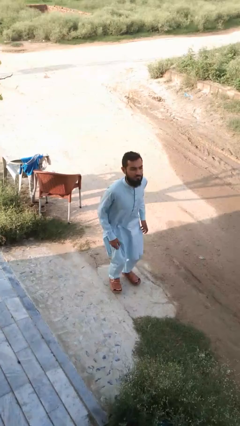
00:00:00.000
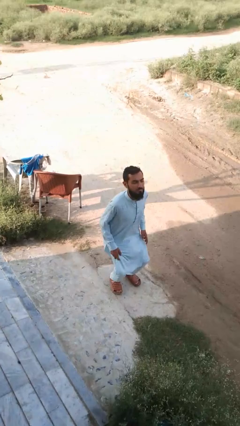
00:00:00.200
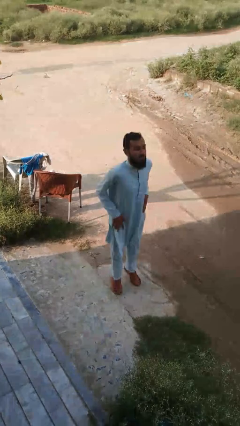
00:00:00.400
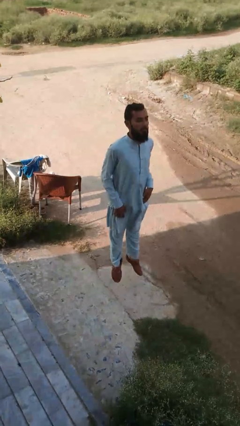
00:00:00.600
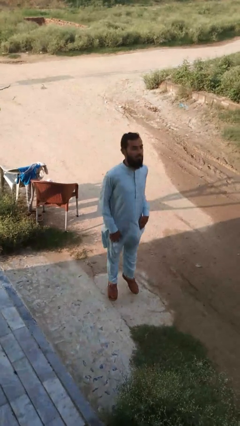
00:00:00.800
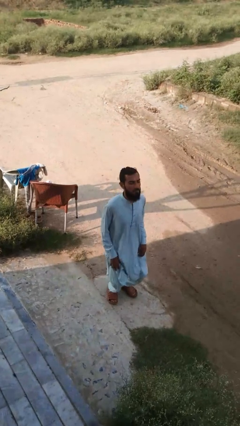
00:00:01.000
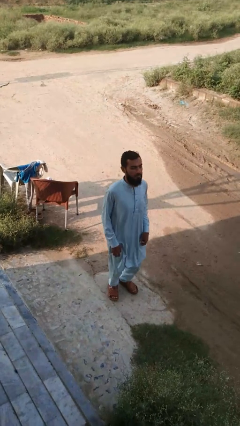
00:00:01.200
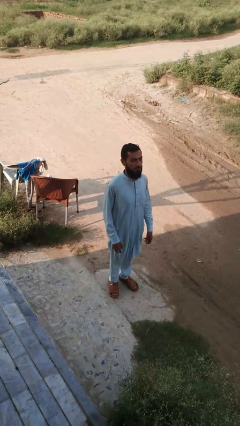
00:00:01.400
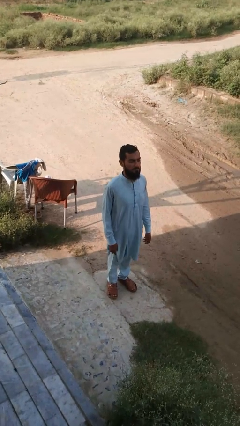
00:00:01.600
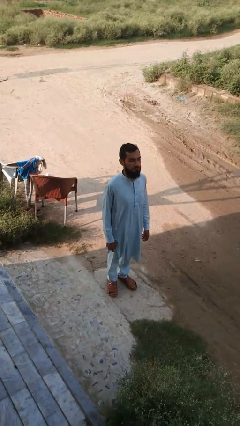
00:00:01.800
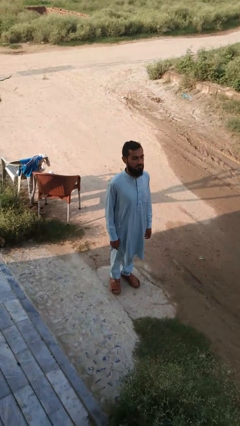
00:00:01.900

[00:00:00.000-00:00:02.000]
person jumps

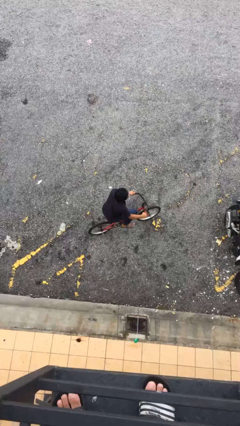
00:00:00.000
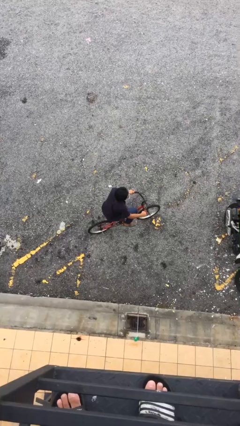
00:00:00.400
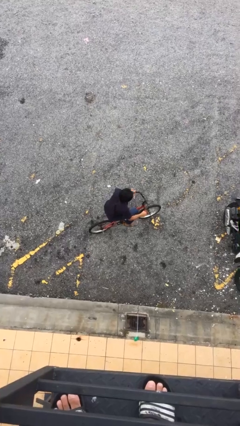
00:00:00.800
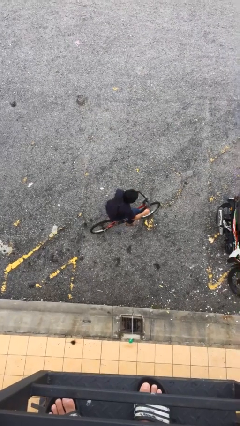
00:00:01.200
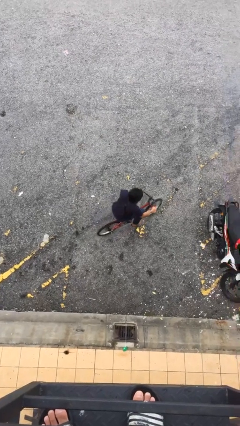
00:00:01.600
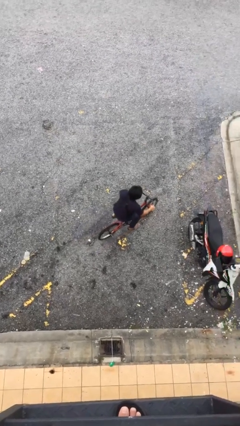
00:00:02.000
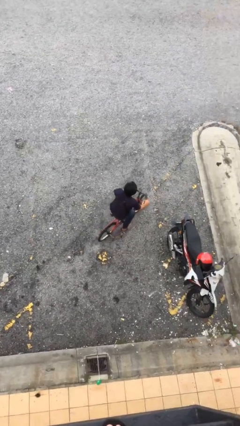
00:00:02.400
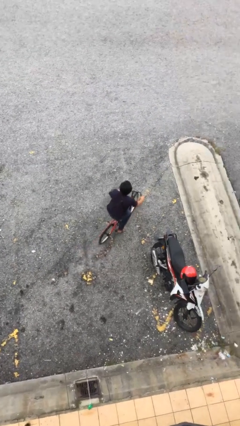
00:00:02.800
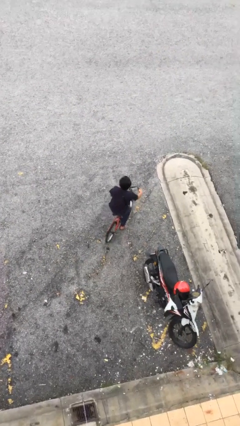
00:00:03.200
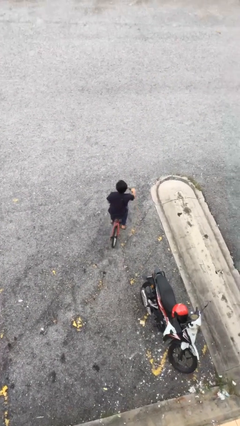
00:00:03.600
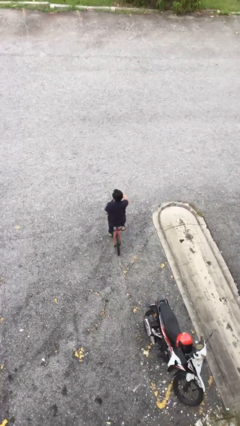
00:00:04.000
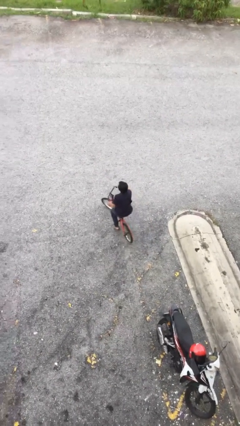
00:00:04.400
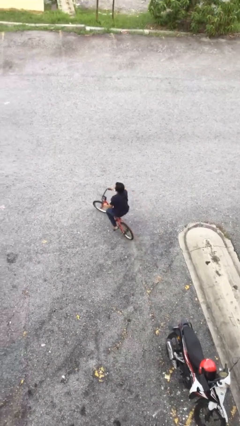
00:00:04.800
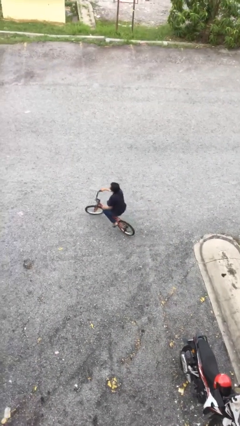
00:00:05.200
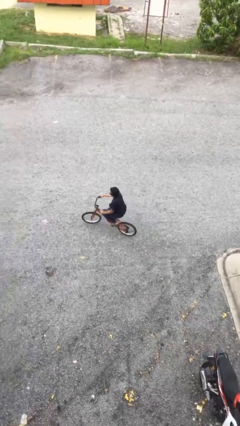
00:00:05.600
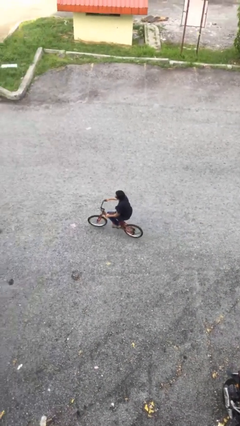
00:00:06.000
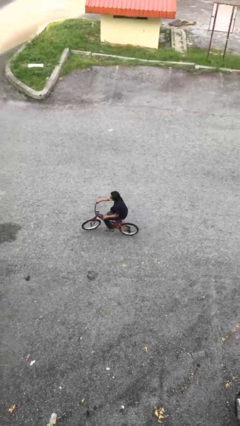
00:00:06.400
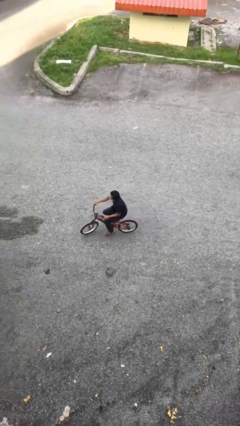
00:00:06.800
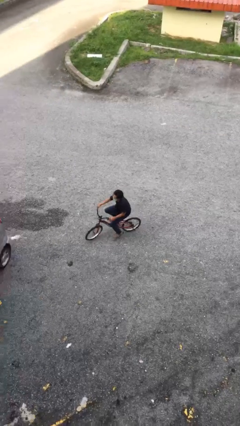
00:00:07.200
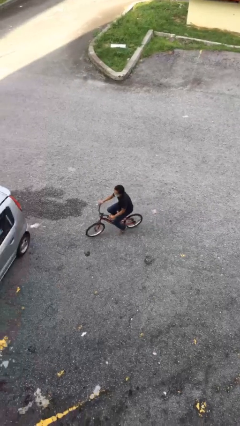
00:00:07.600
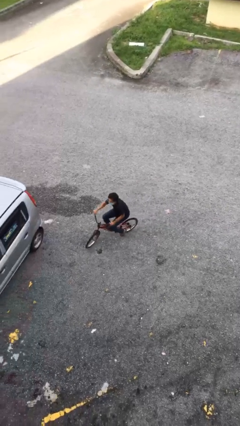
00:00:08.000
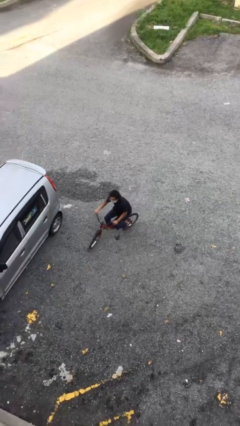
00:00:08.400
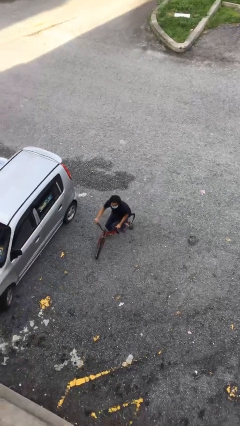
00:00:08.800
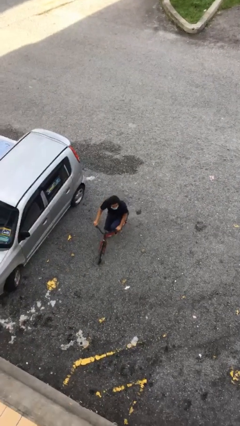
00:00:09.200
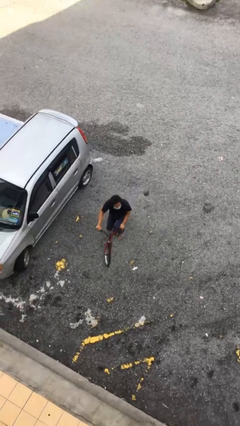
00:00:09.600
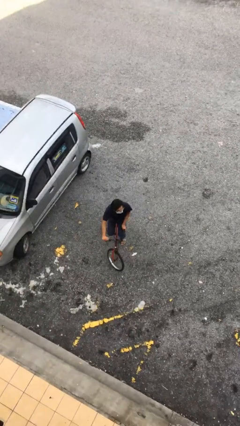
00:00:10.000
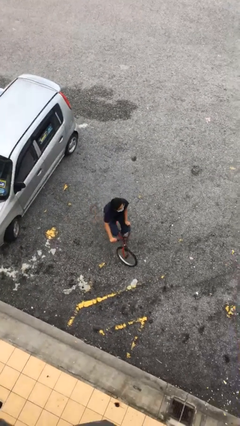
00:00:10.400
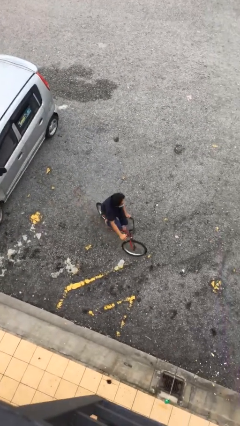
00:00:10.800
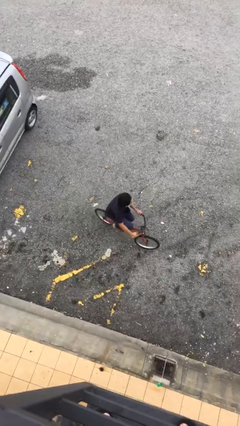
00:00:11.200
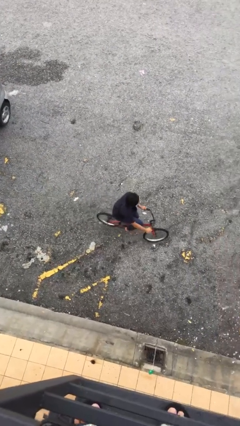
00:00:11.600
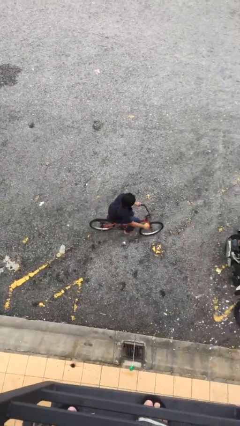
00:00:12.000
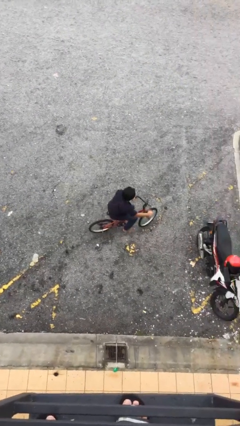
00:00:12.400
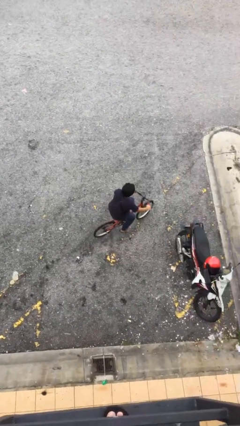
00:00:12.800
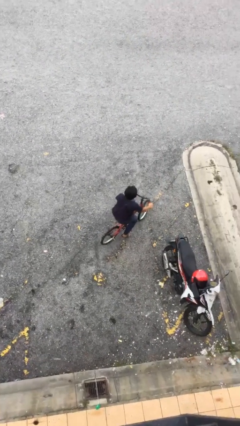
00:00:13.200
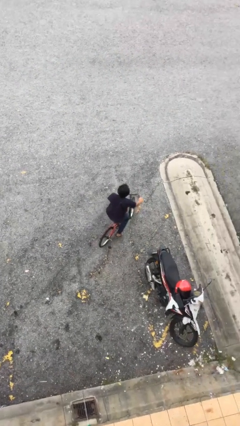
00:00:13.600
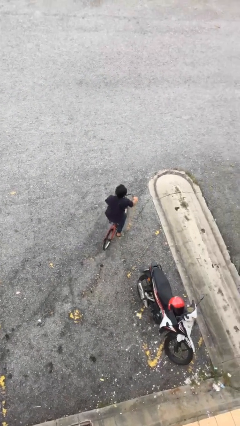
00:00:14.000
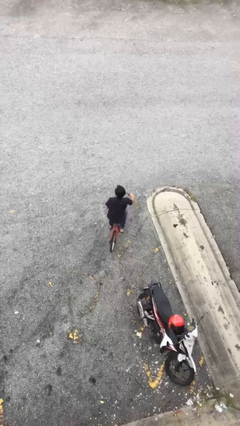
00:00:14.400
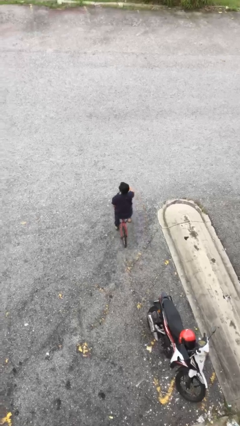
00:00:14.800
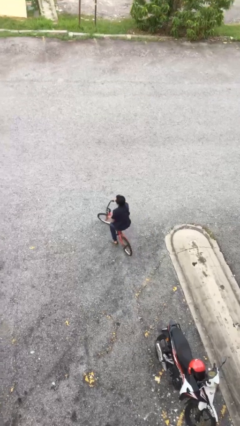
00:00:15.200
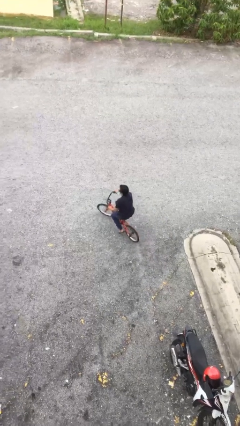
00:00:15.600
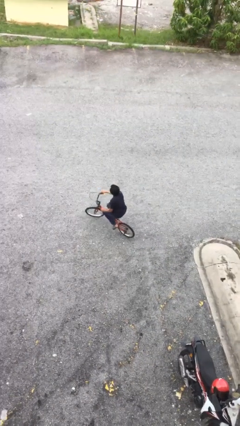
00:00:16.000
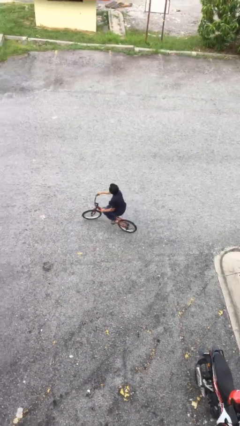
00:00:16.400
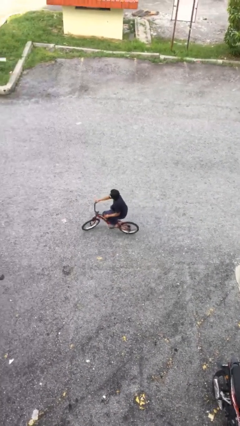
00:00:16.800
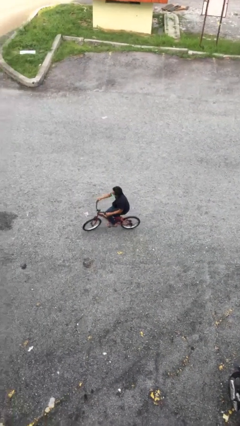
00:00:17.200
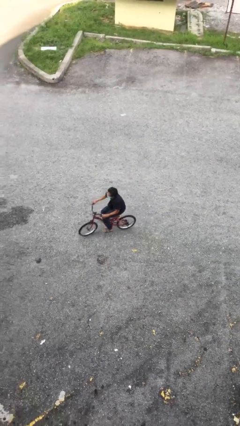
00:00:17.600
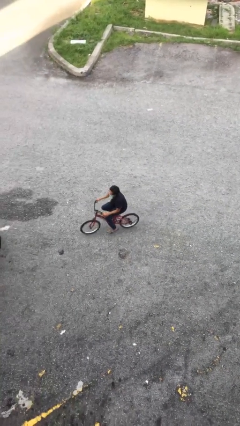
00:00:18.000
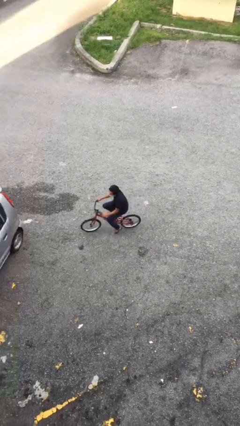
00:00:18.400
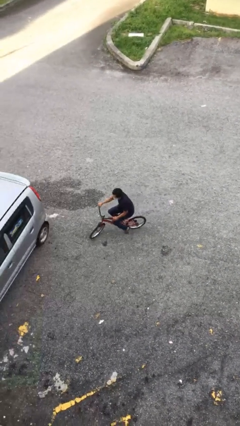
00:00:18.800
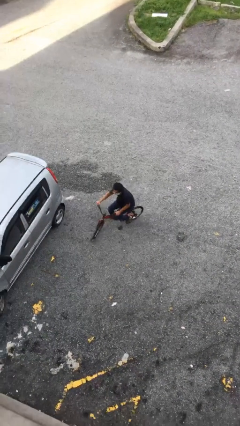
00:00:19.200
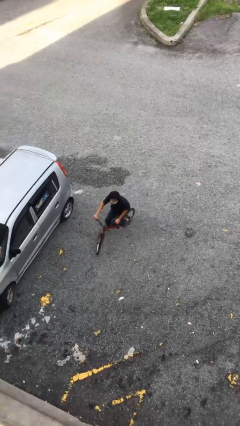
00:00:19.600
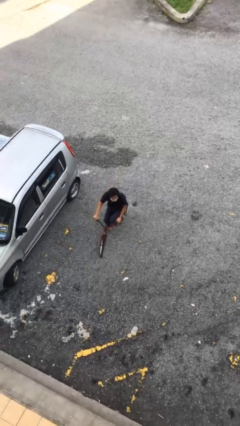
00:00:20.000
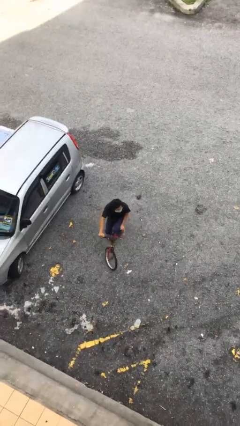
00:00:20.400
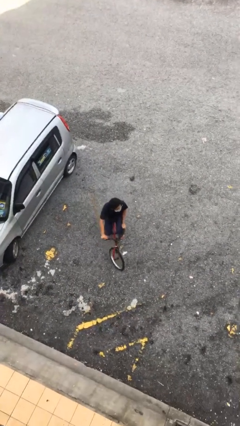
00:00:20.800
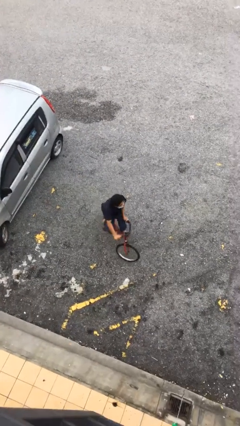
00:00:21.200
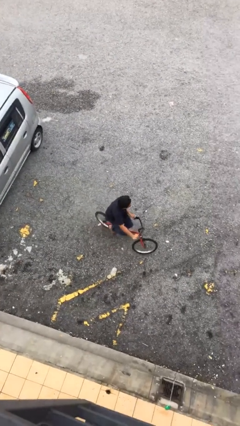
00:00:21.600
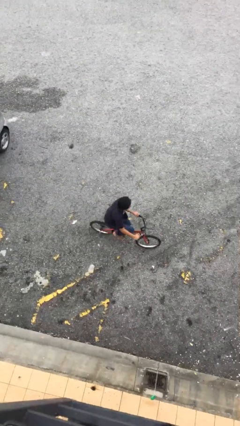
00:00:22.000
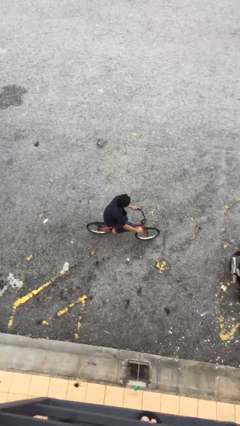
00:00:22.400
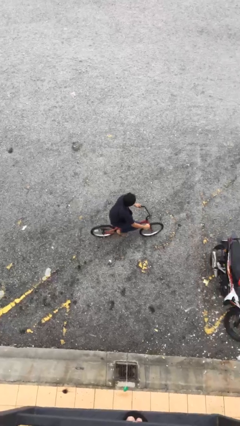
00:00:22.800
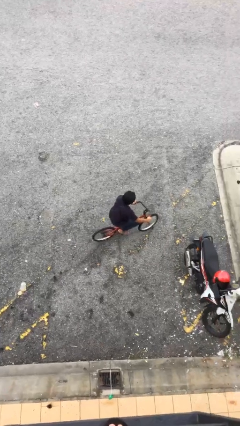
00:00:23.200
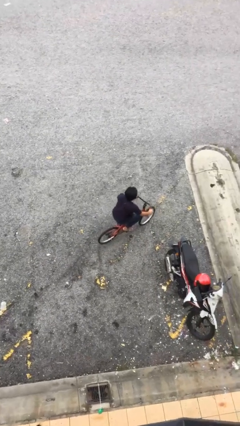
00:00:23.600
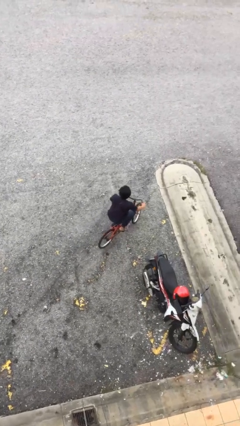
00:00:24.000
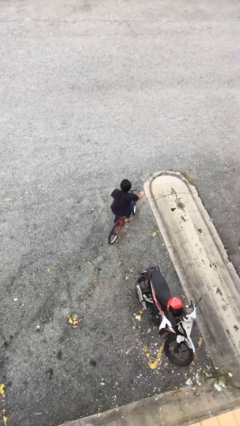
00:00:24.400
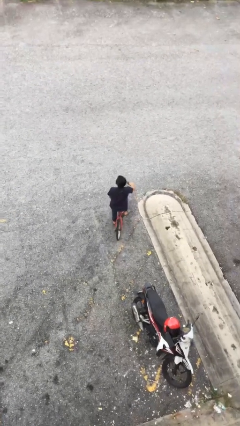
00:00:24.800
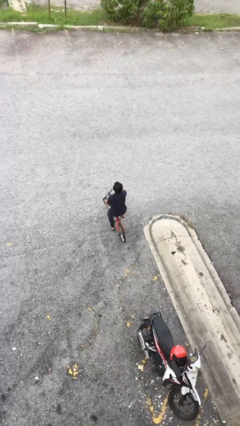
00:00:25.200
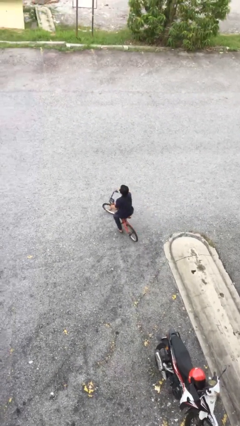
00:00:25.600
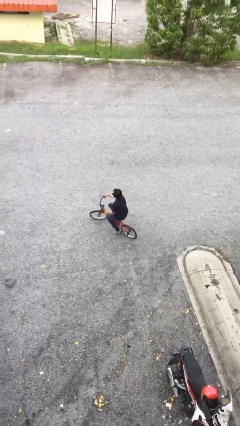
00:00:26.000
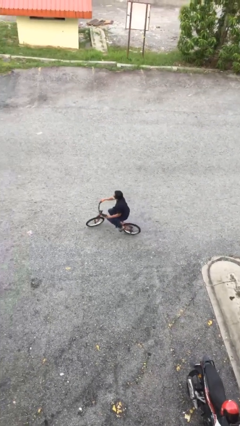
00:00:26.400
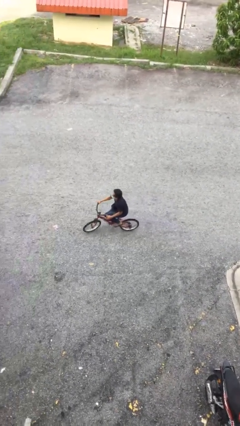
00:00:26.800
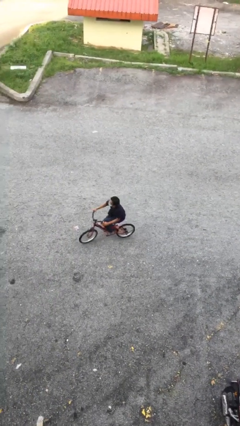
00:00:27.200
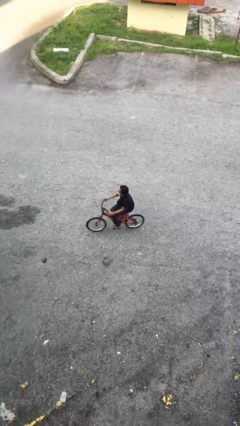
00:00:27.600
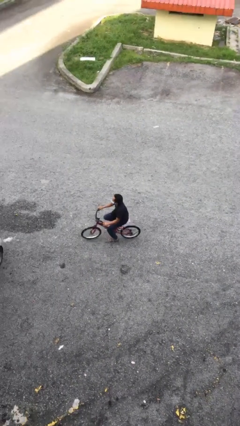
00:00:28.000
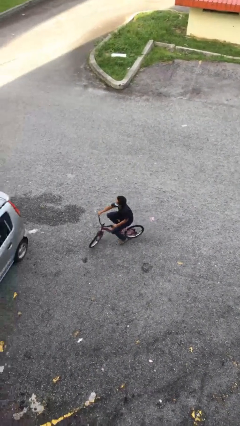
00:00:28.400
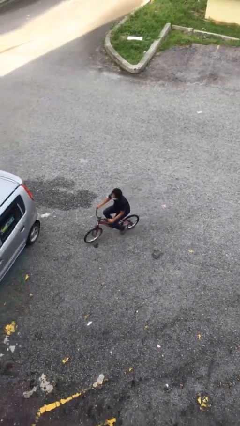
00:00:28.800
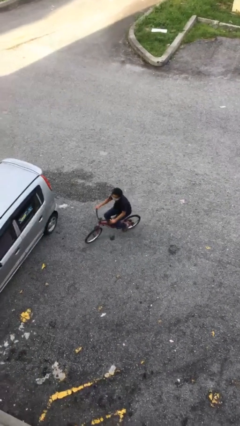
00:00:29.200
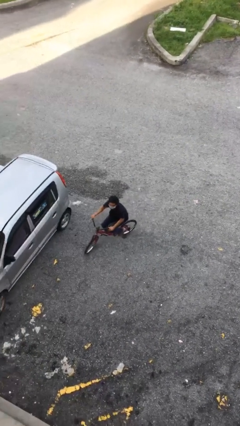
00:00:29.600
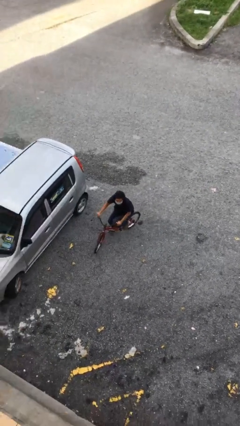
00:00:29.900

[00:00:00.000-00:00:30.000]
person rides bicycle

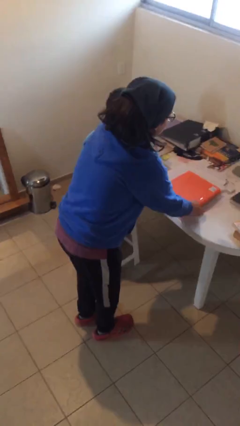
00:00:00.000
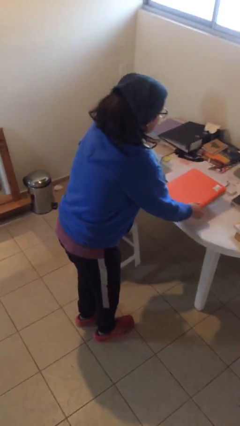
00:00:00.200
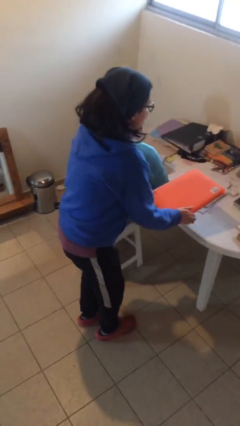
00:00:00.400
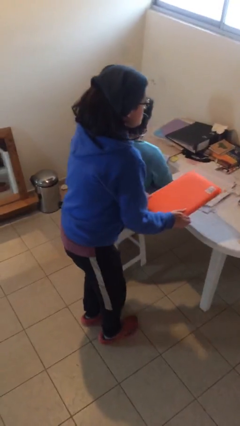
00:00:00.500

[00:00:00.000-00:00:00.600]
person steals object from person

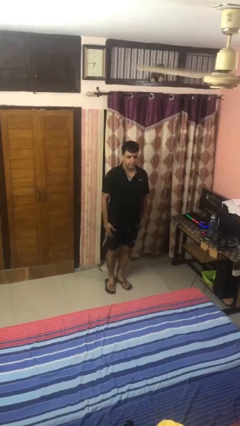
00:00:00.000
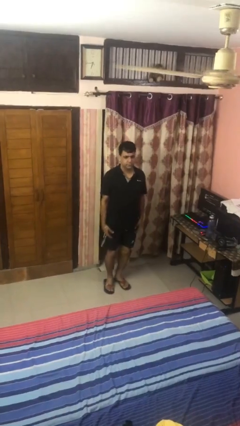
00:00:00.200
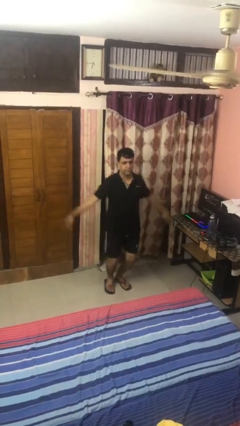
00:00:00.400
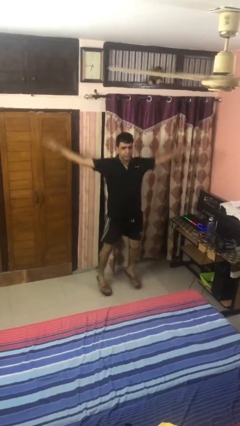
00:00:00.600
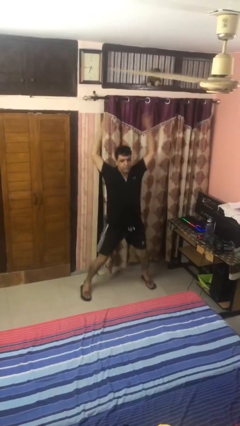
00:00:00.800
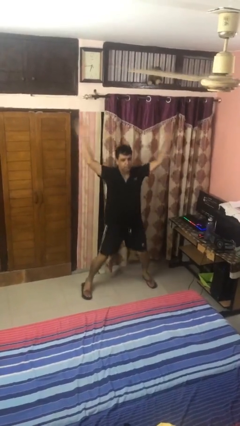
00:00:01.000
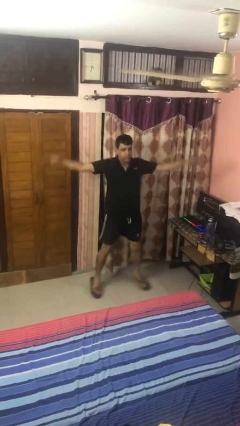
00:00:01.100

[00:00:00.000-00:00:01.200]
person exercises with jumping jacks
